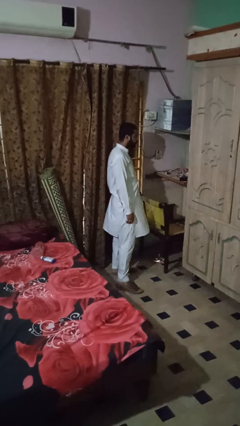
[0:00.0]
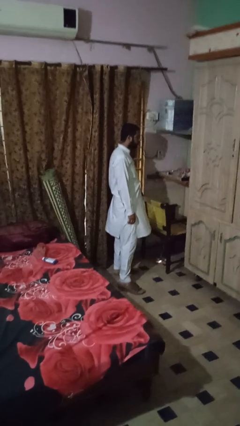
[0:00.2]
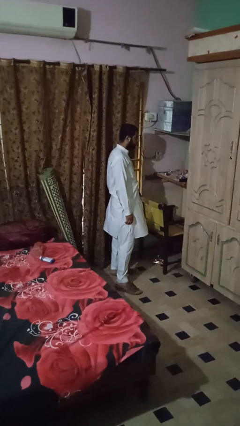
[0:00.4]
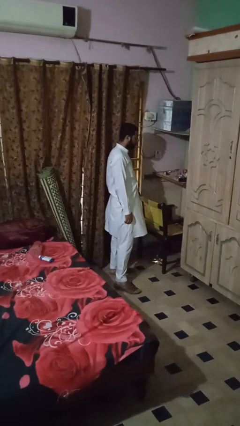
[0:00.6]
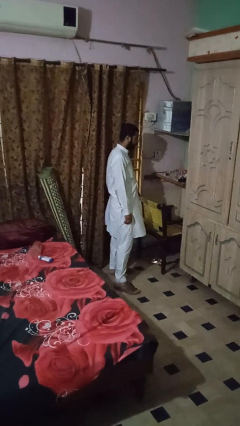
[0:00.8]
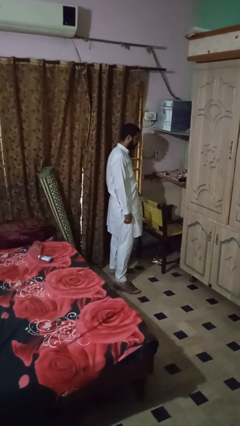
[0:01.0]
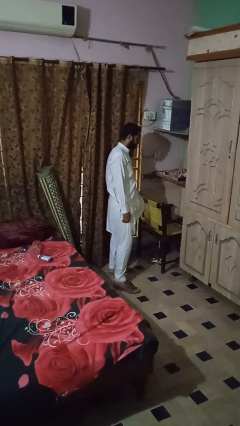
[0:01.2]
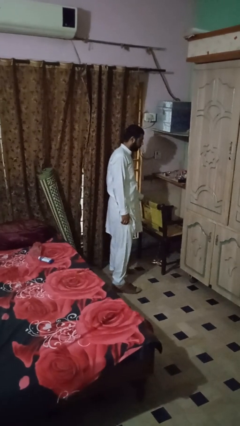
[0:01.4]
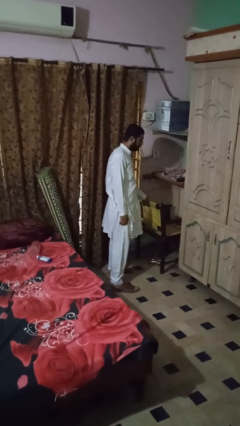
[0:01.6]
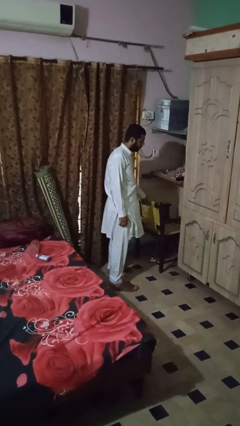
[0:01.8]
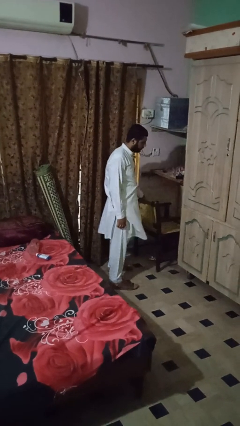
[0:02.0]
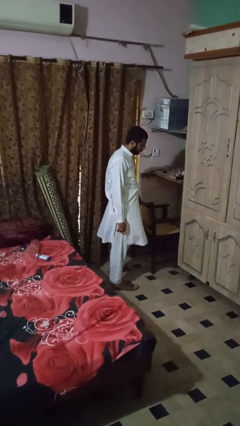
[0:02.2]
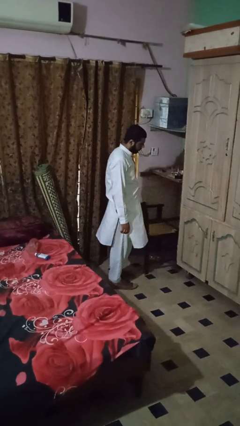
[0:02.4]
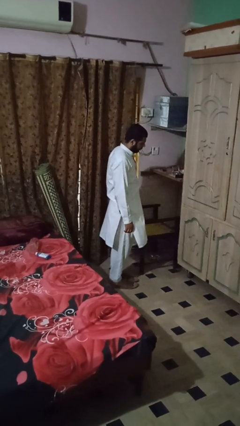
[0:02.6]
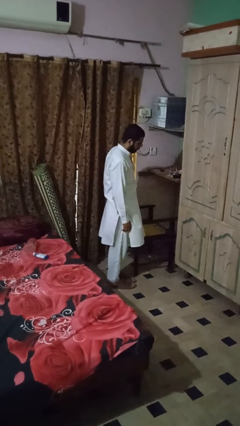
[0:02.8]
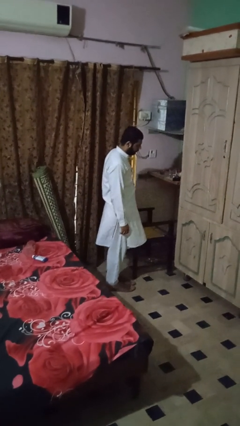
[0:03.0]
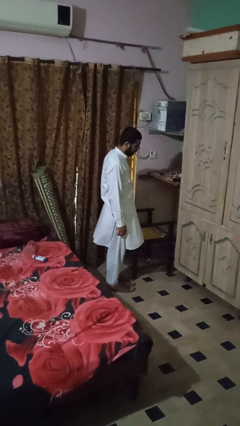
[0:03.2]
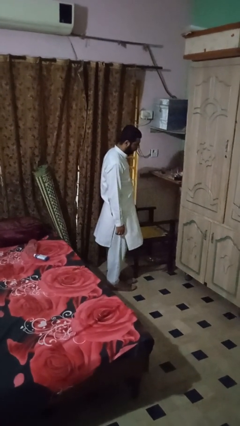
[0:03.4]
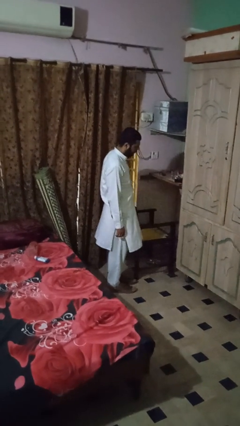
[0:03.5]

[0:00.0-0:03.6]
person pulls out chair

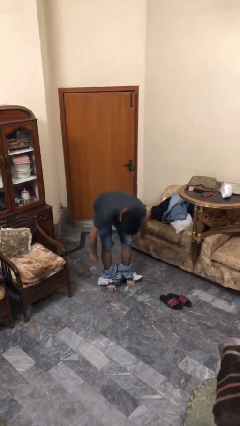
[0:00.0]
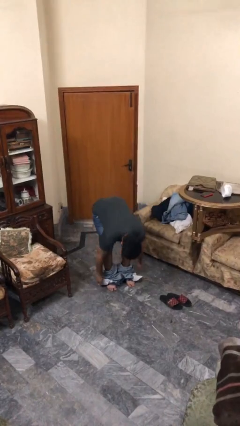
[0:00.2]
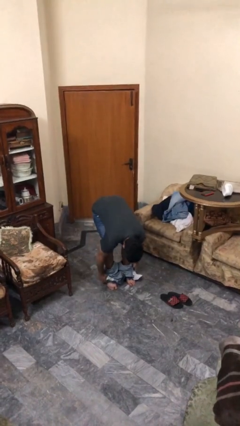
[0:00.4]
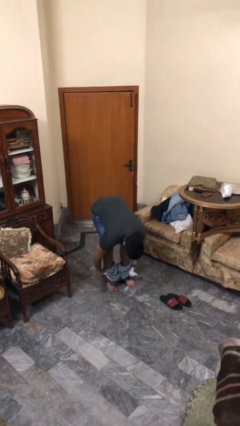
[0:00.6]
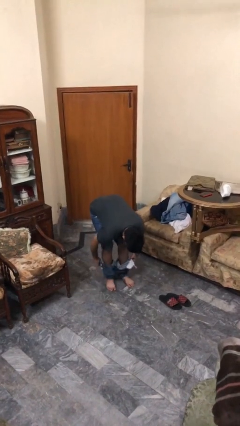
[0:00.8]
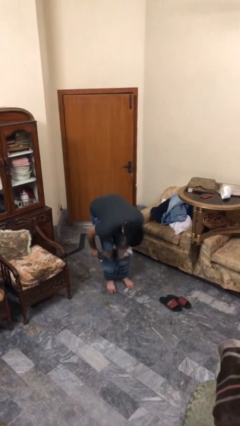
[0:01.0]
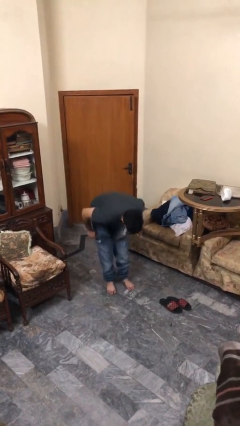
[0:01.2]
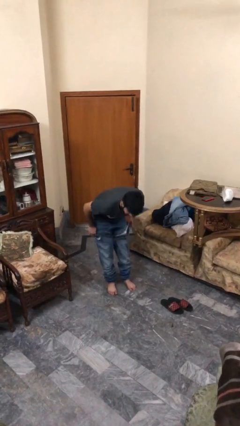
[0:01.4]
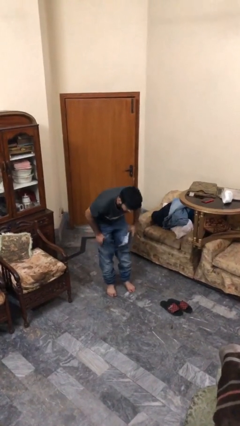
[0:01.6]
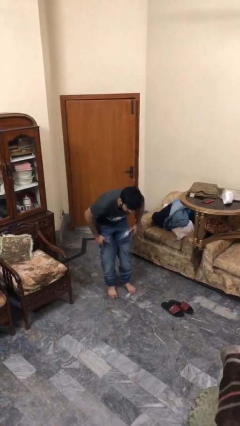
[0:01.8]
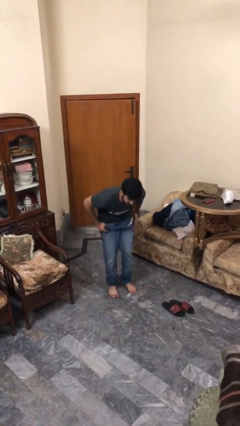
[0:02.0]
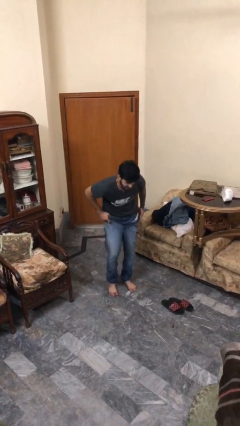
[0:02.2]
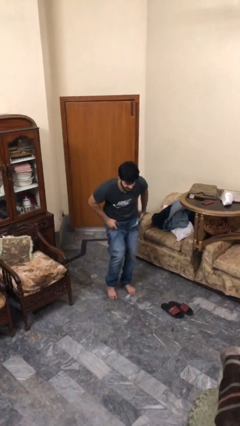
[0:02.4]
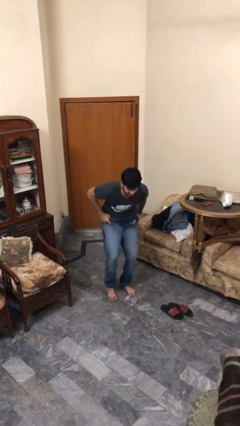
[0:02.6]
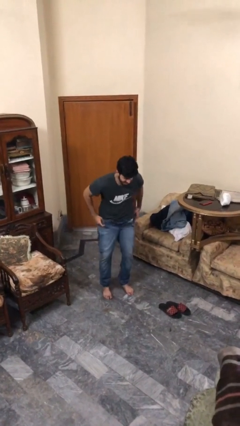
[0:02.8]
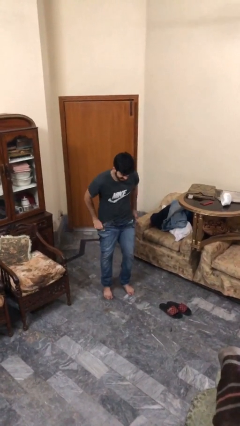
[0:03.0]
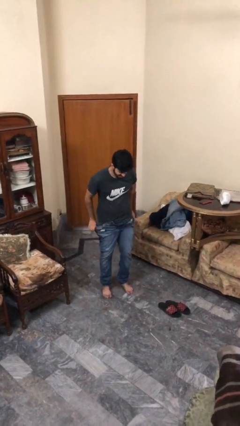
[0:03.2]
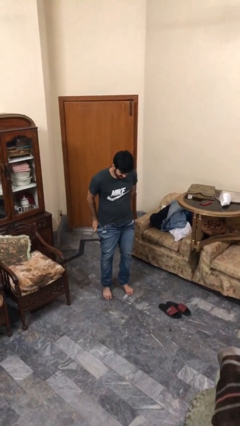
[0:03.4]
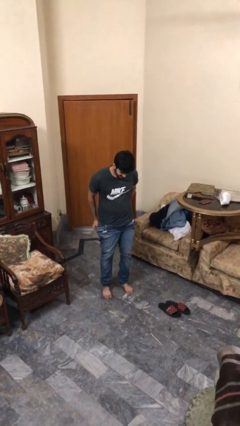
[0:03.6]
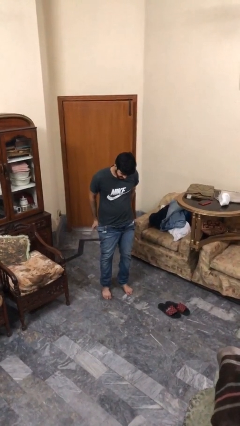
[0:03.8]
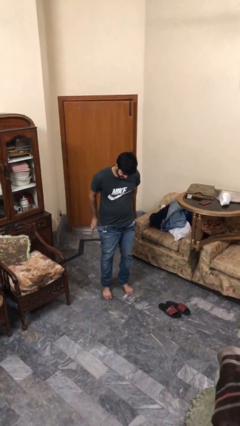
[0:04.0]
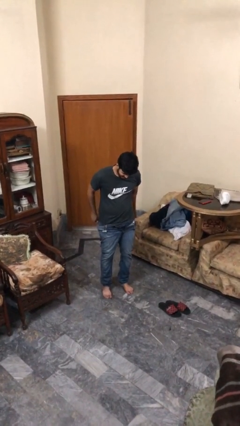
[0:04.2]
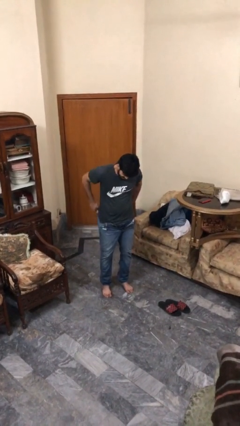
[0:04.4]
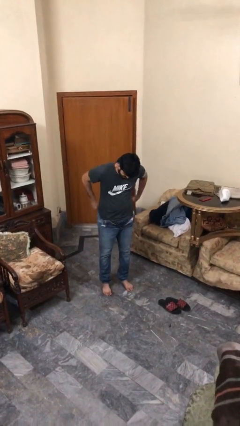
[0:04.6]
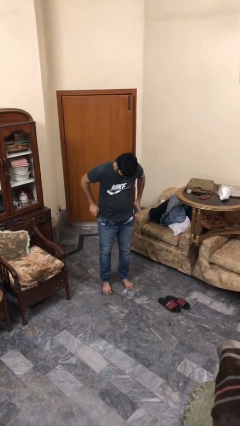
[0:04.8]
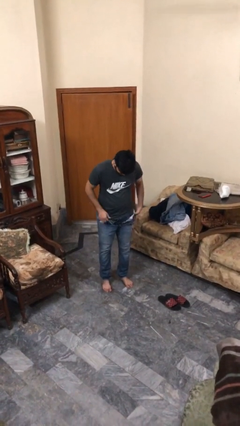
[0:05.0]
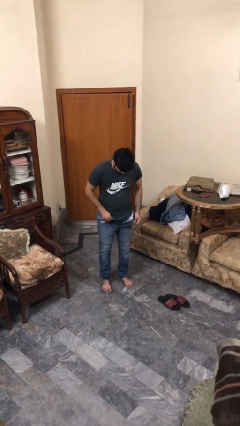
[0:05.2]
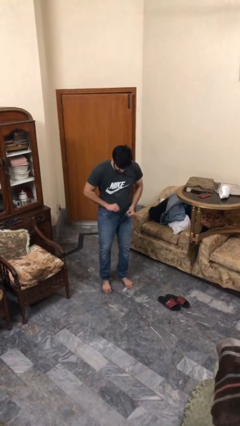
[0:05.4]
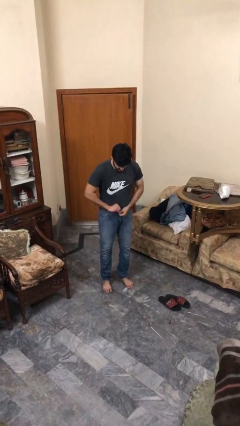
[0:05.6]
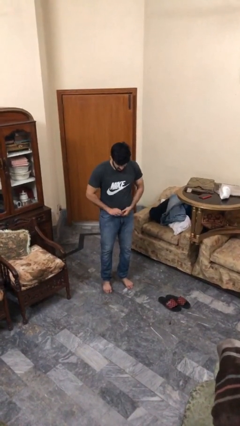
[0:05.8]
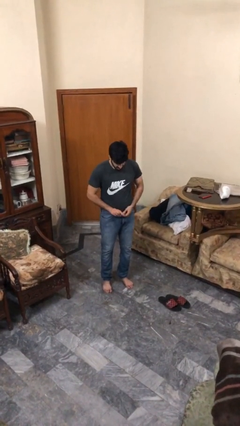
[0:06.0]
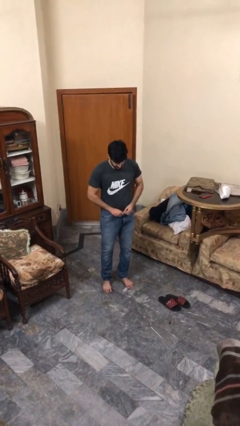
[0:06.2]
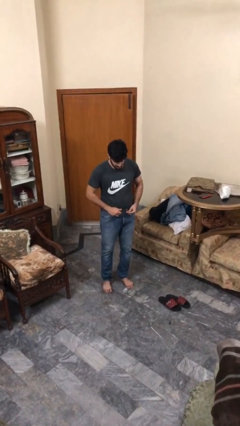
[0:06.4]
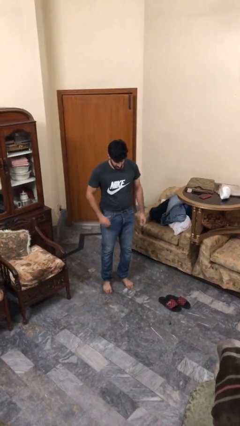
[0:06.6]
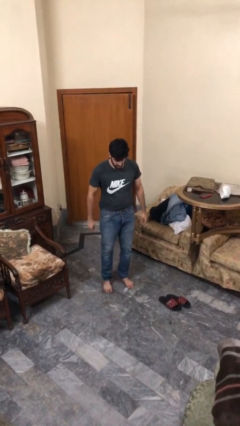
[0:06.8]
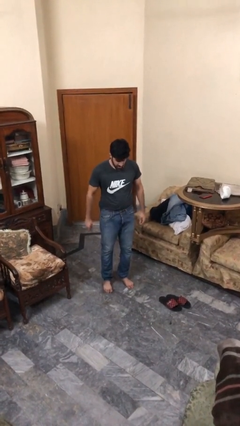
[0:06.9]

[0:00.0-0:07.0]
person puts on pants

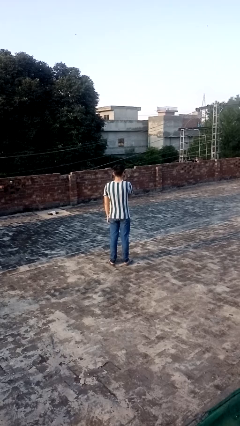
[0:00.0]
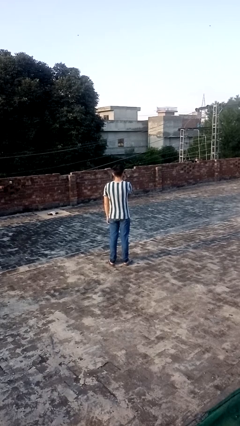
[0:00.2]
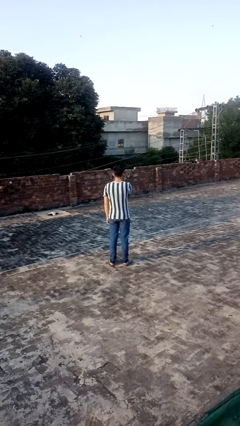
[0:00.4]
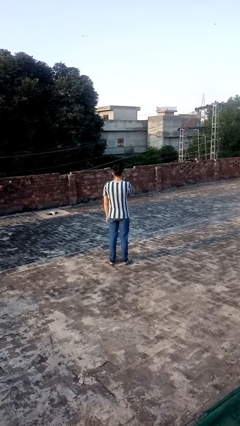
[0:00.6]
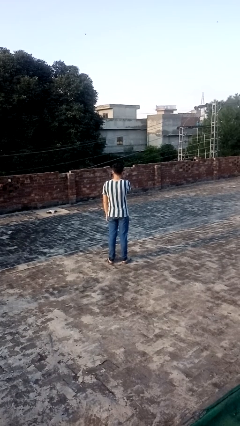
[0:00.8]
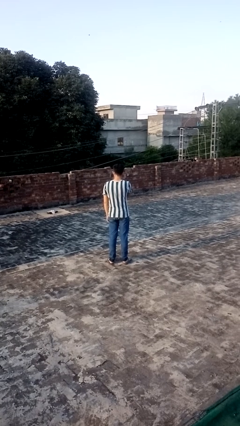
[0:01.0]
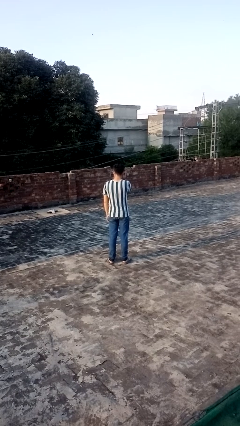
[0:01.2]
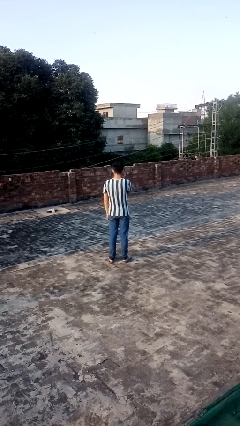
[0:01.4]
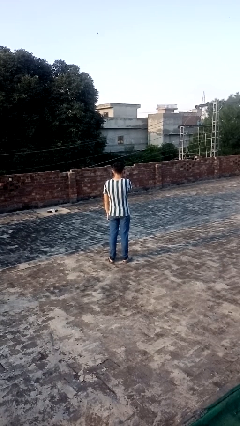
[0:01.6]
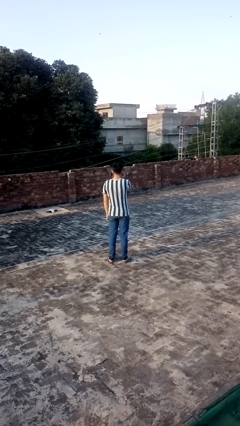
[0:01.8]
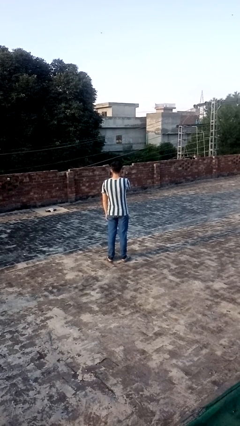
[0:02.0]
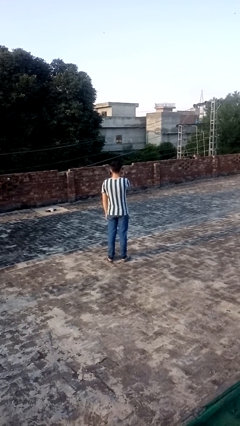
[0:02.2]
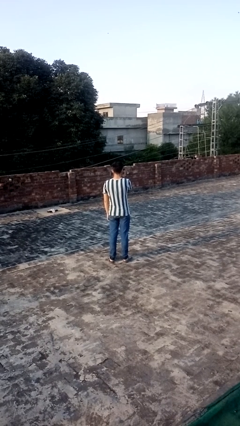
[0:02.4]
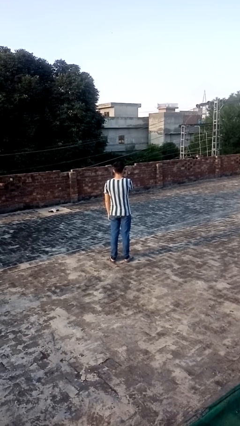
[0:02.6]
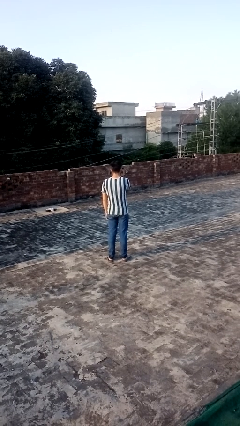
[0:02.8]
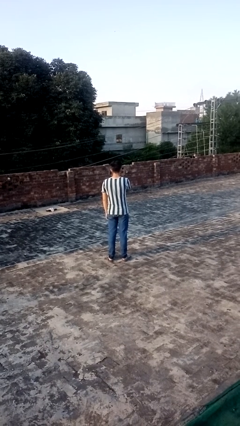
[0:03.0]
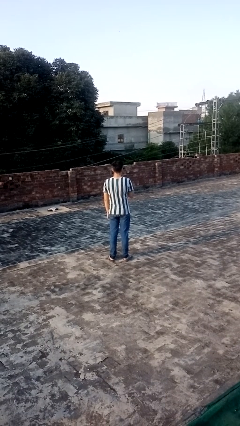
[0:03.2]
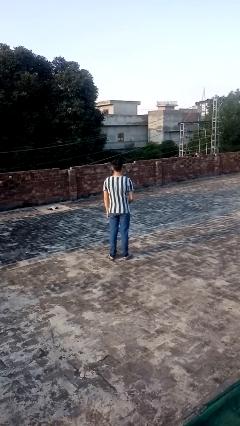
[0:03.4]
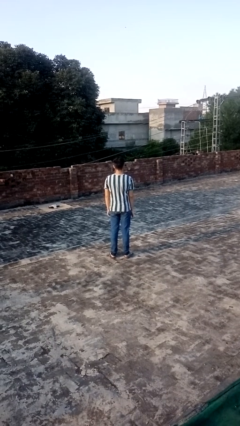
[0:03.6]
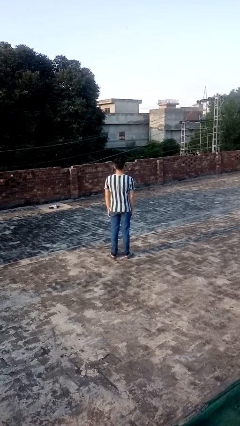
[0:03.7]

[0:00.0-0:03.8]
person scratches face

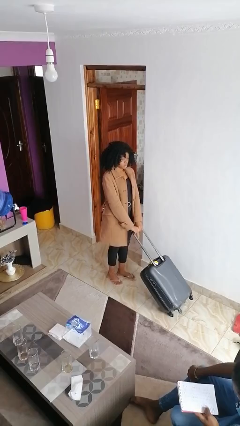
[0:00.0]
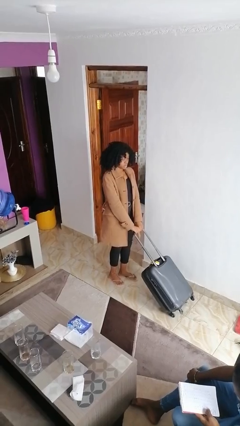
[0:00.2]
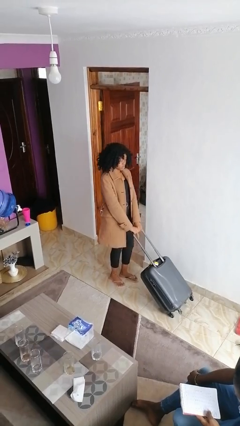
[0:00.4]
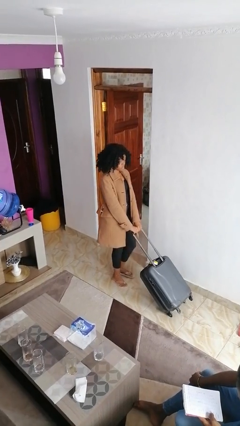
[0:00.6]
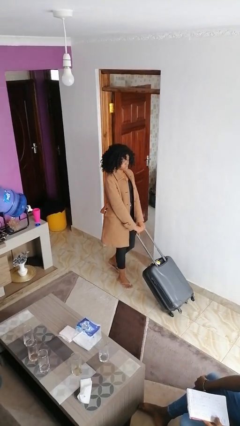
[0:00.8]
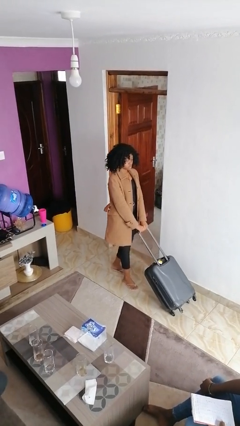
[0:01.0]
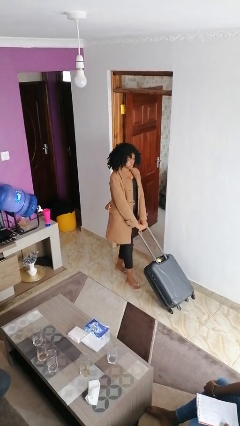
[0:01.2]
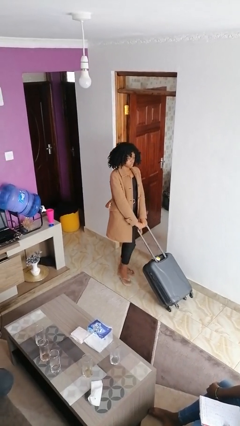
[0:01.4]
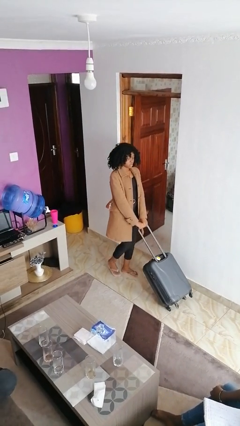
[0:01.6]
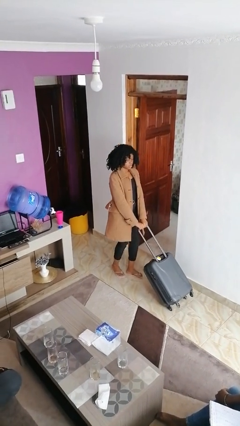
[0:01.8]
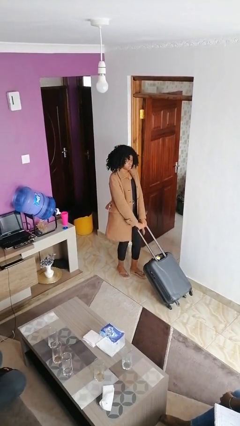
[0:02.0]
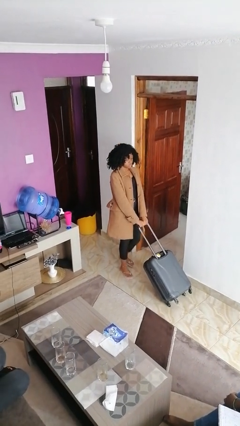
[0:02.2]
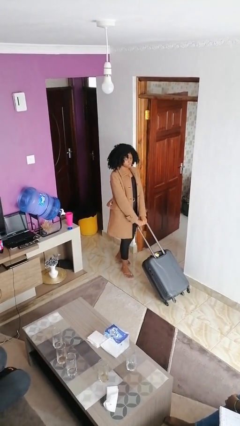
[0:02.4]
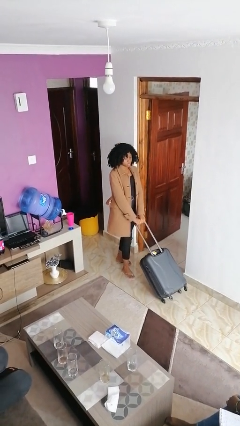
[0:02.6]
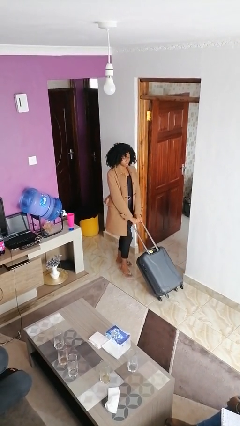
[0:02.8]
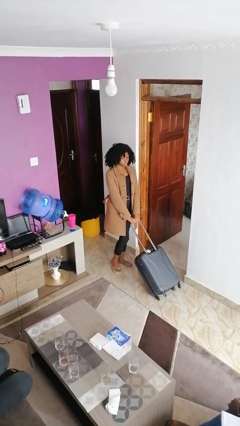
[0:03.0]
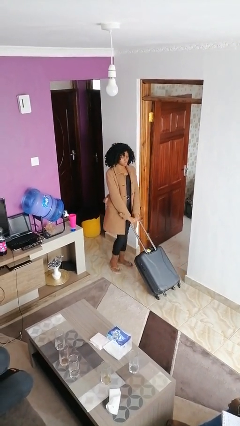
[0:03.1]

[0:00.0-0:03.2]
person pulls wheeled cart
